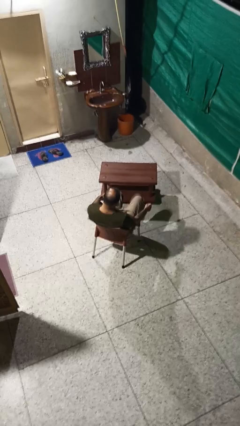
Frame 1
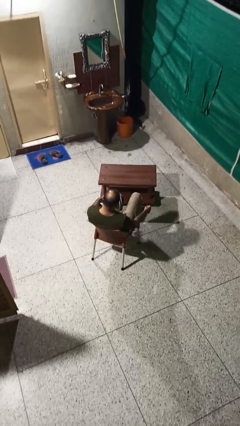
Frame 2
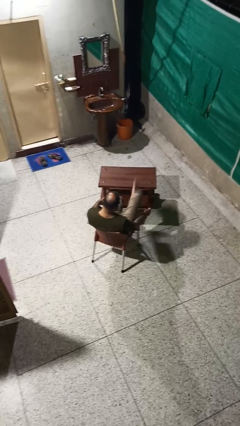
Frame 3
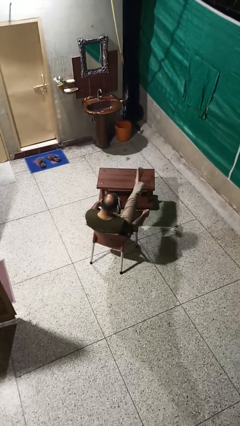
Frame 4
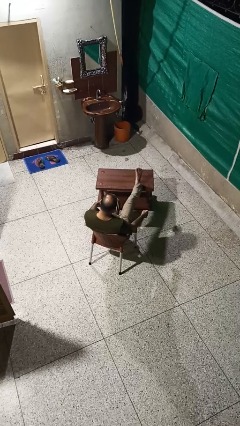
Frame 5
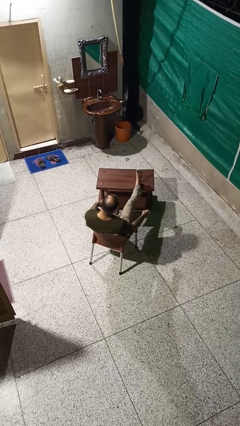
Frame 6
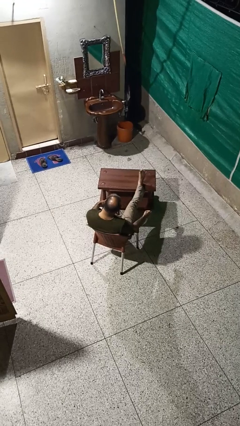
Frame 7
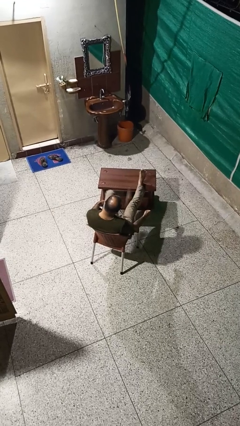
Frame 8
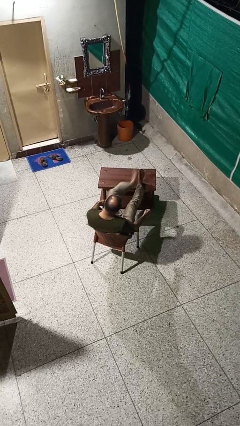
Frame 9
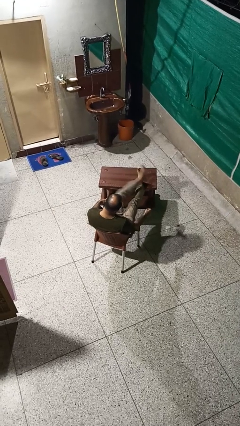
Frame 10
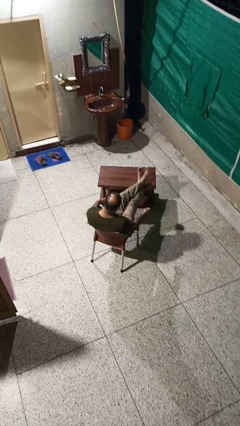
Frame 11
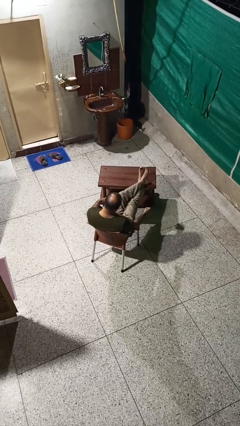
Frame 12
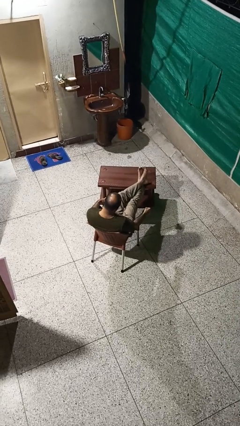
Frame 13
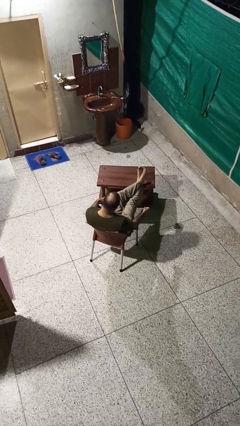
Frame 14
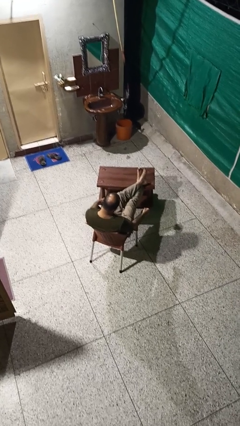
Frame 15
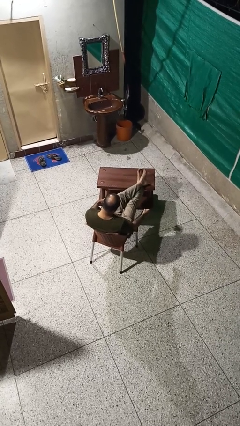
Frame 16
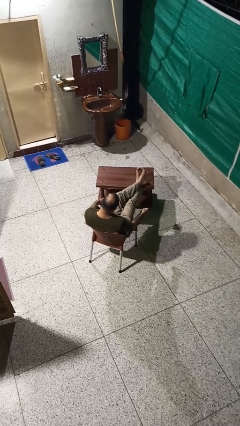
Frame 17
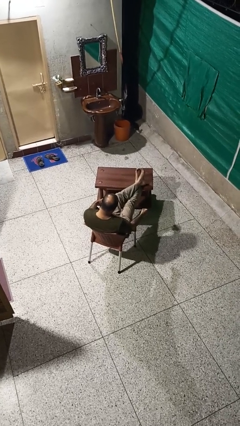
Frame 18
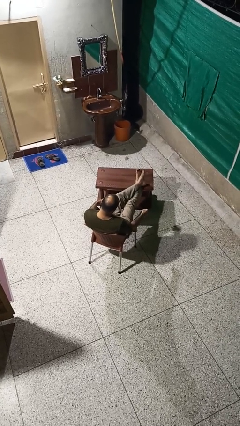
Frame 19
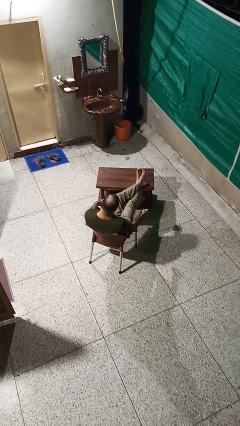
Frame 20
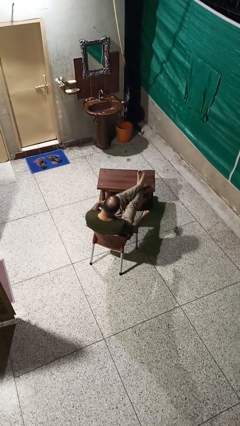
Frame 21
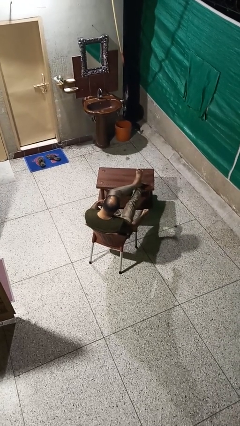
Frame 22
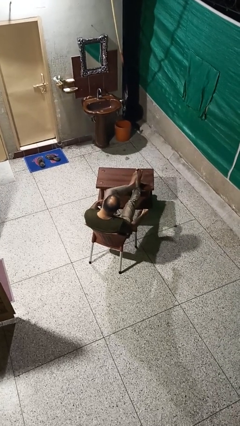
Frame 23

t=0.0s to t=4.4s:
person puts feet up

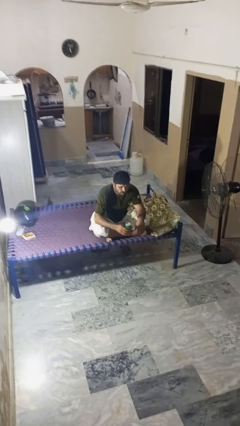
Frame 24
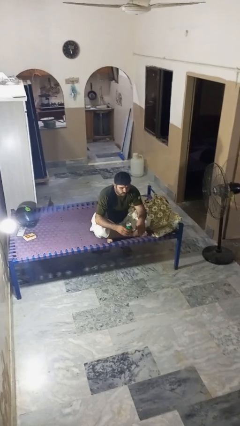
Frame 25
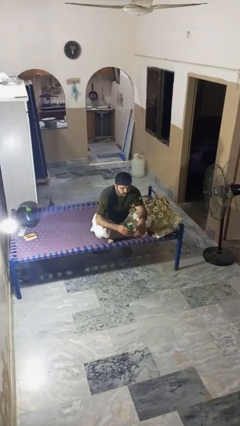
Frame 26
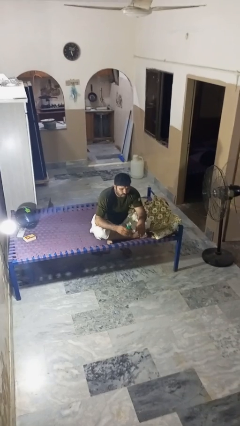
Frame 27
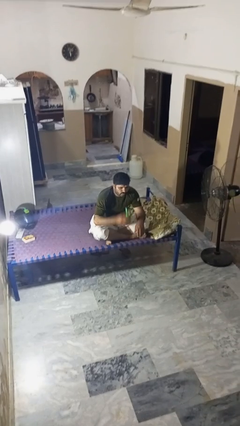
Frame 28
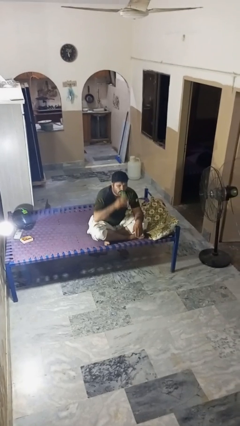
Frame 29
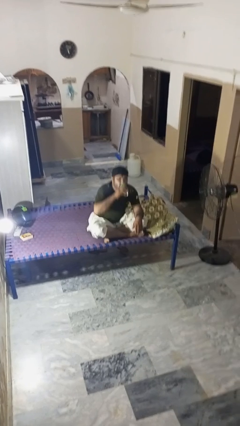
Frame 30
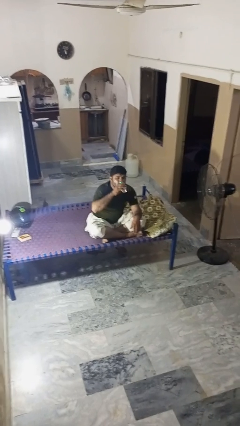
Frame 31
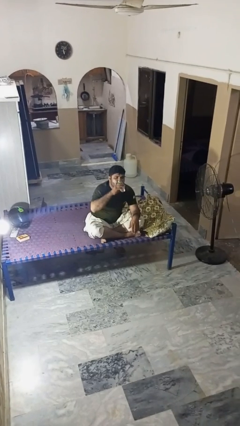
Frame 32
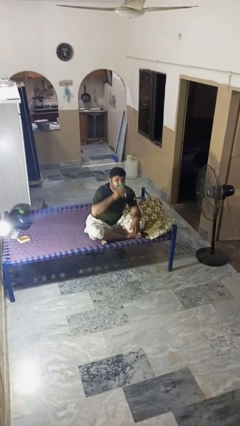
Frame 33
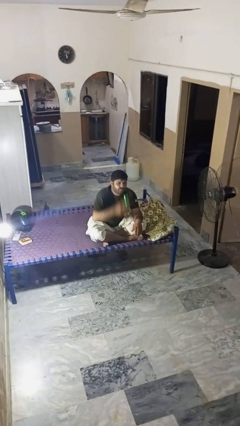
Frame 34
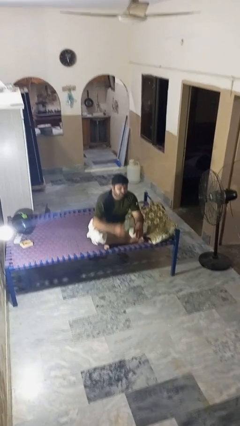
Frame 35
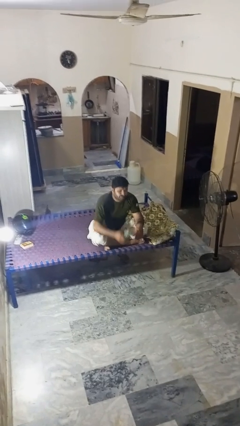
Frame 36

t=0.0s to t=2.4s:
person drinks from beverage can

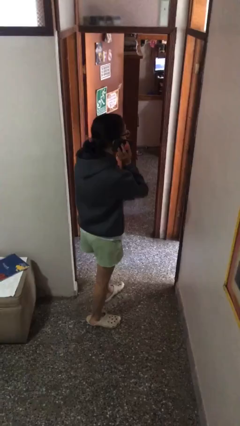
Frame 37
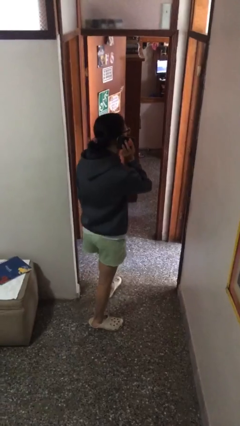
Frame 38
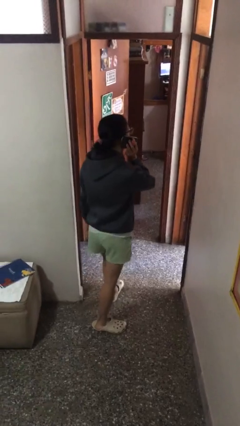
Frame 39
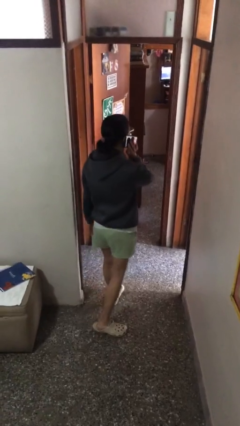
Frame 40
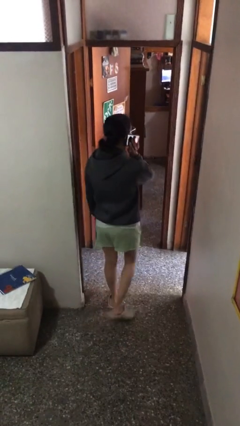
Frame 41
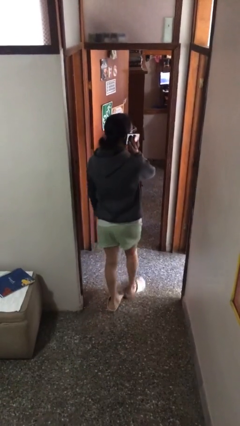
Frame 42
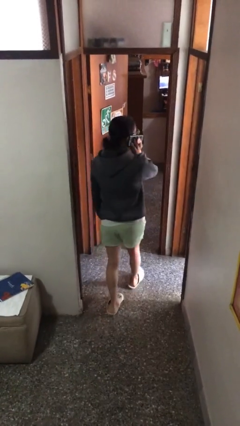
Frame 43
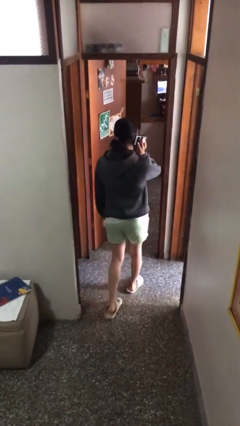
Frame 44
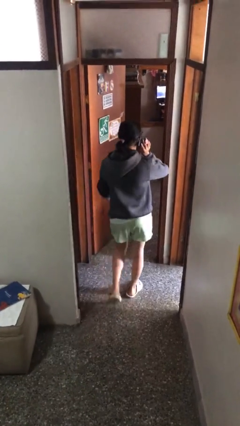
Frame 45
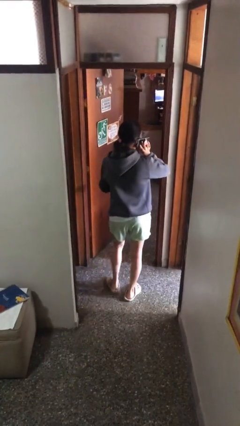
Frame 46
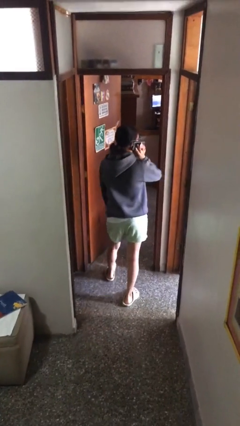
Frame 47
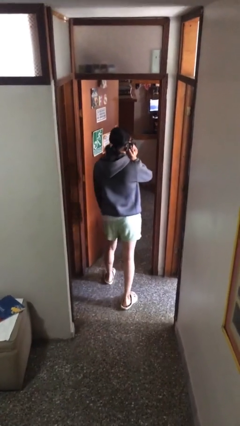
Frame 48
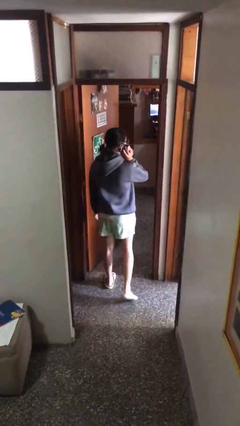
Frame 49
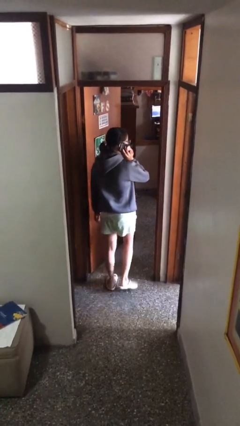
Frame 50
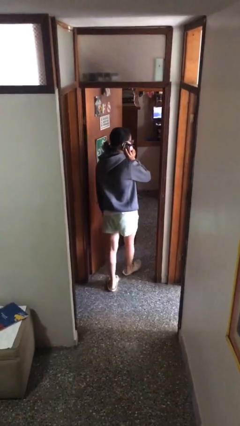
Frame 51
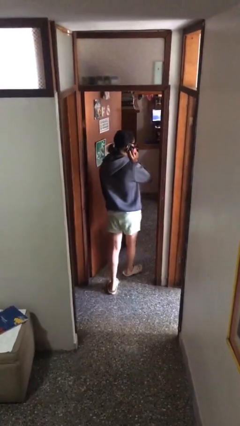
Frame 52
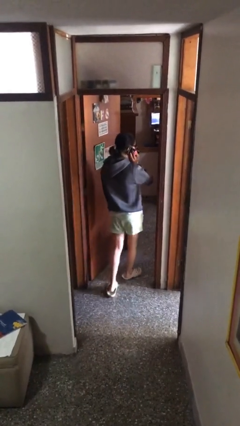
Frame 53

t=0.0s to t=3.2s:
person talks on phone

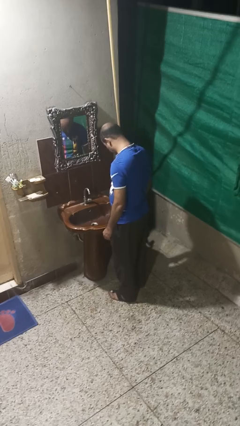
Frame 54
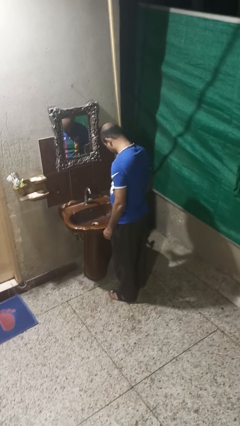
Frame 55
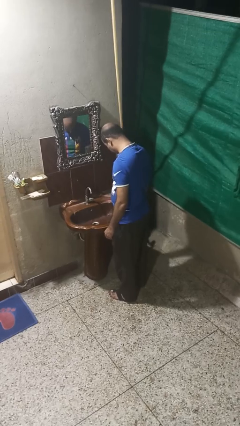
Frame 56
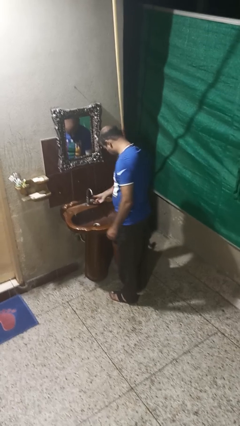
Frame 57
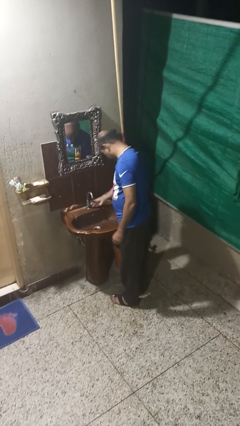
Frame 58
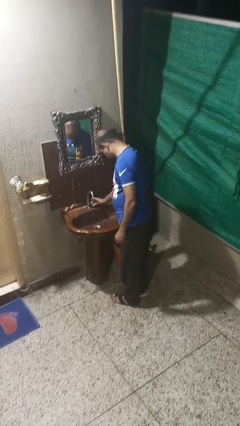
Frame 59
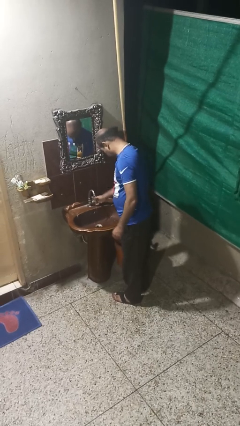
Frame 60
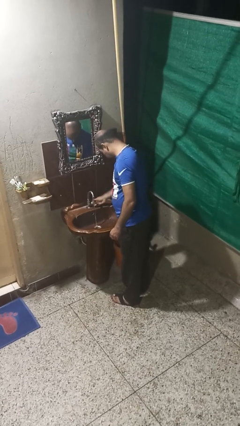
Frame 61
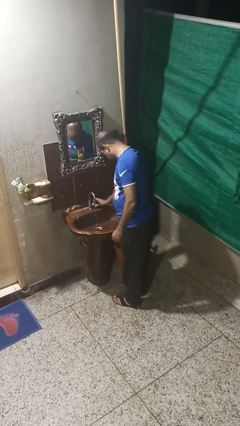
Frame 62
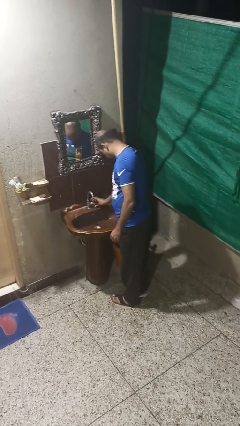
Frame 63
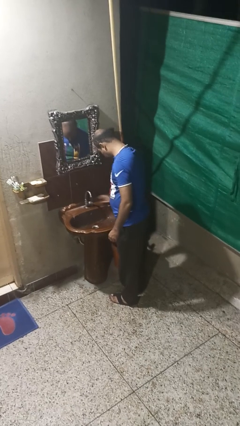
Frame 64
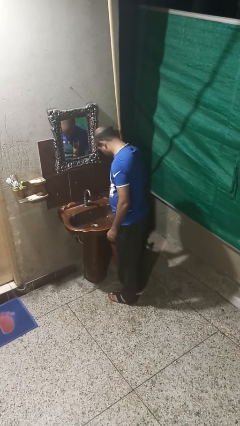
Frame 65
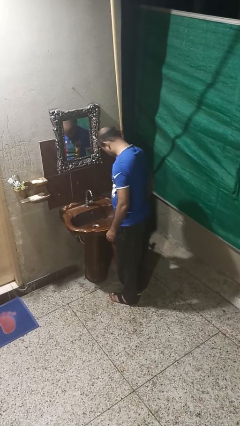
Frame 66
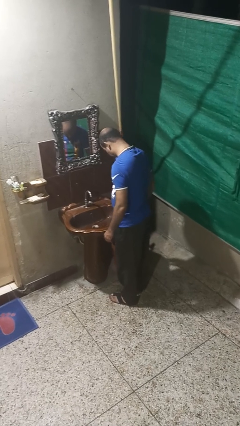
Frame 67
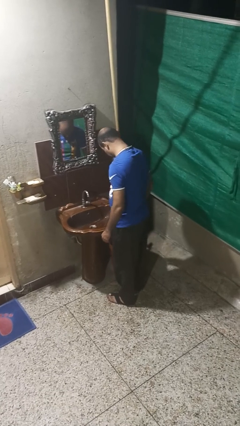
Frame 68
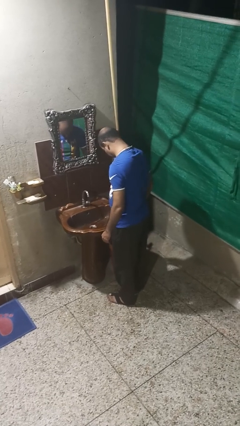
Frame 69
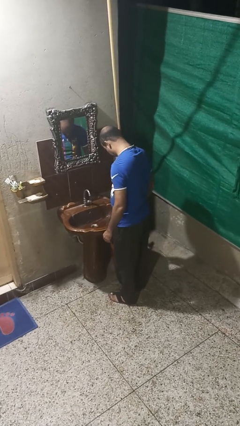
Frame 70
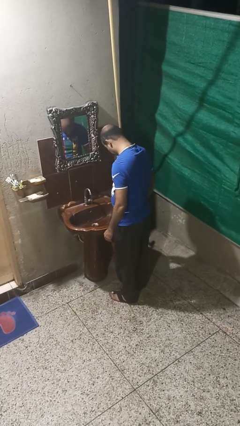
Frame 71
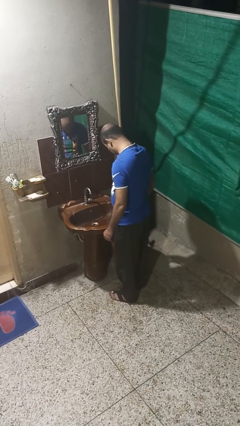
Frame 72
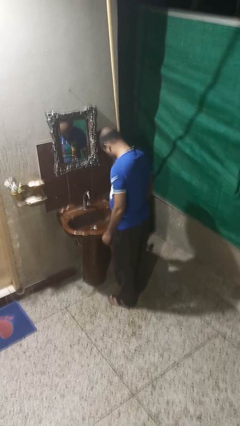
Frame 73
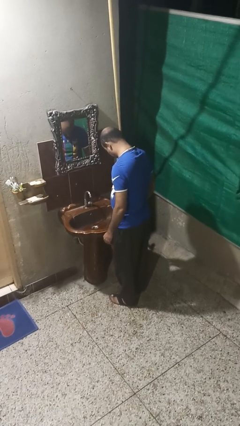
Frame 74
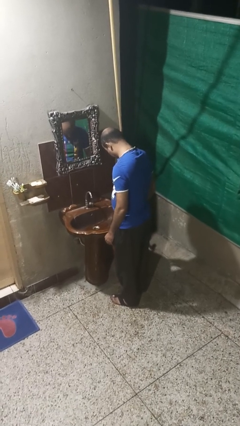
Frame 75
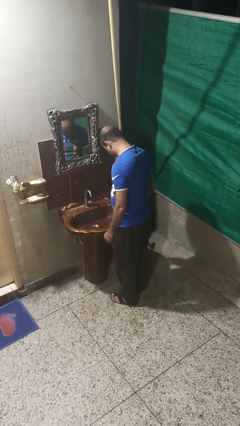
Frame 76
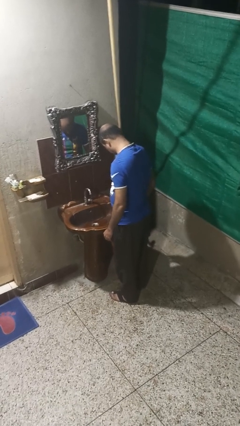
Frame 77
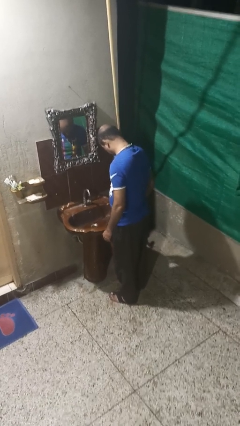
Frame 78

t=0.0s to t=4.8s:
person turns on faucet

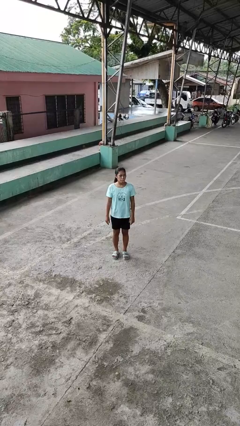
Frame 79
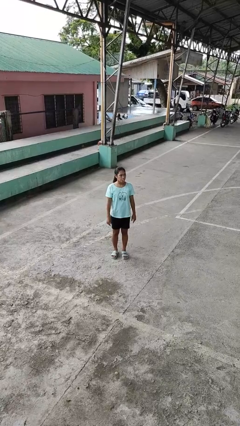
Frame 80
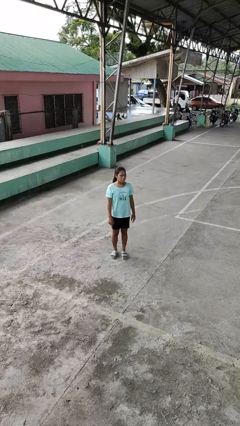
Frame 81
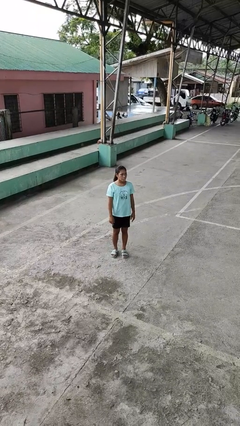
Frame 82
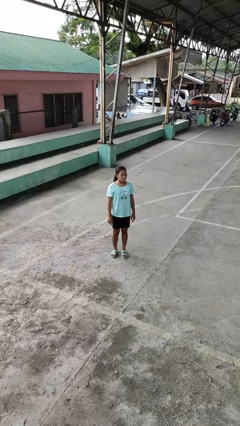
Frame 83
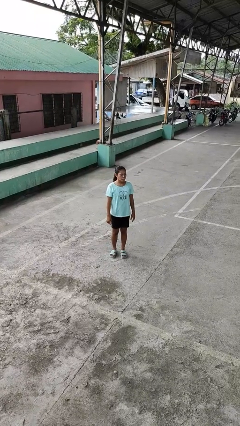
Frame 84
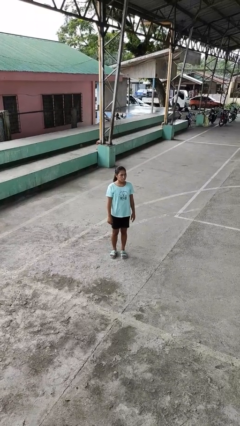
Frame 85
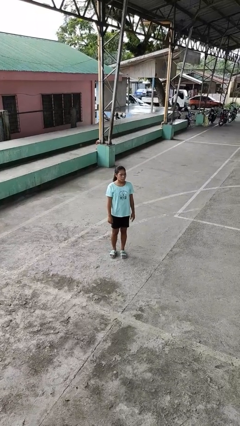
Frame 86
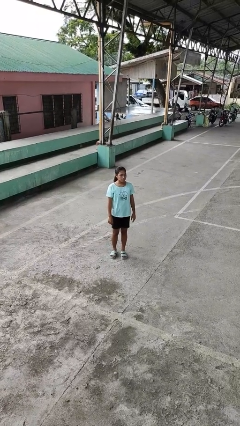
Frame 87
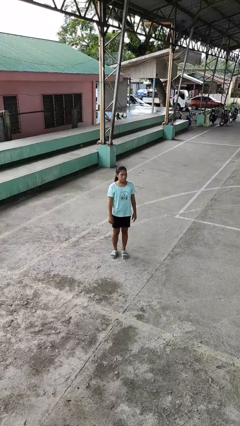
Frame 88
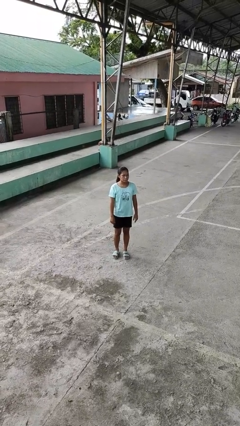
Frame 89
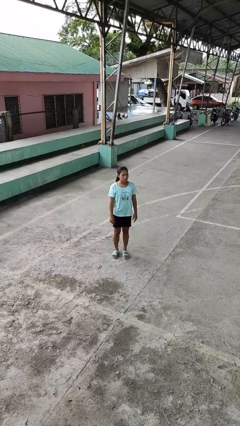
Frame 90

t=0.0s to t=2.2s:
person sticks out tongue

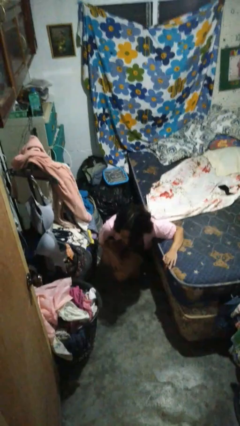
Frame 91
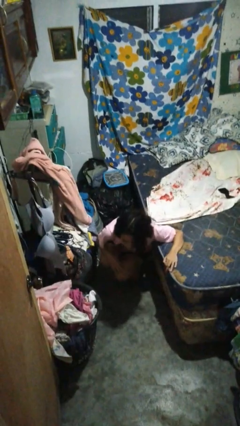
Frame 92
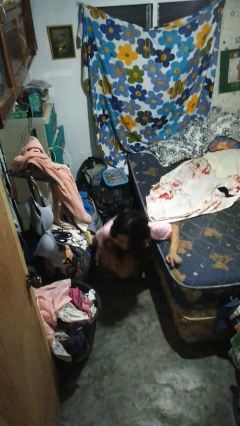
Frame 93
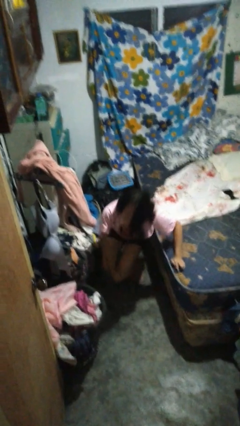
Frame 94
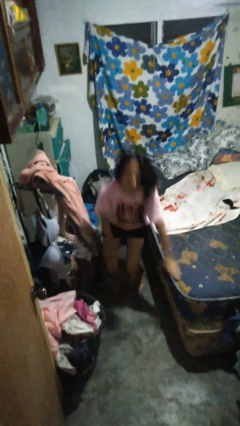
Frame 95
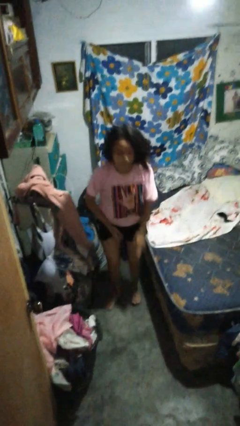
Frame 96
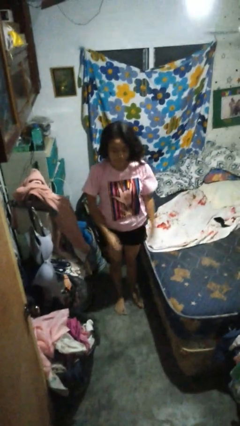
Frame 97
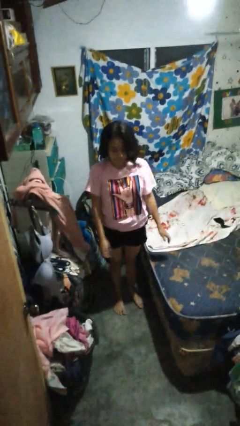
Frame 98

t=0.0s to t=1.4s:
person stands up from floor
